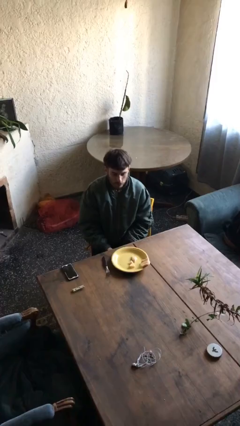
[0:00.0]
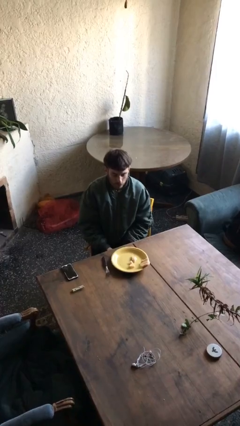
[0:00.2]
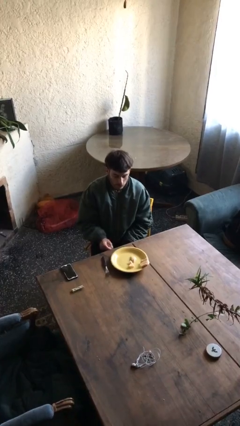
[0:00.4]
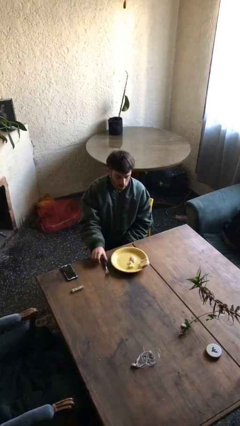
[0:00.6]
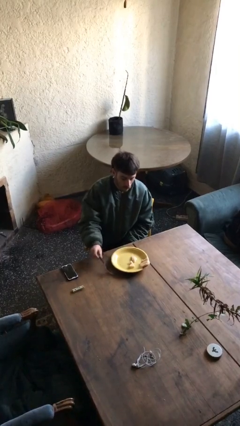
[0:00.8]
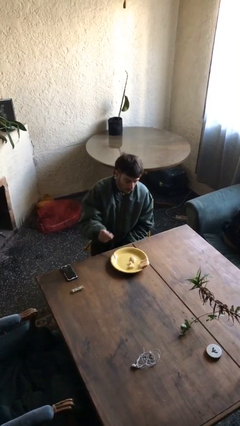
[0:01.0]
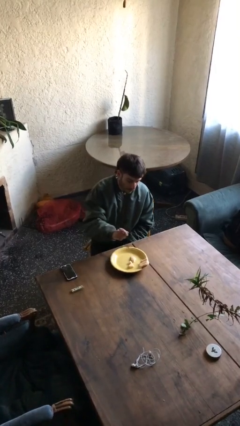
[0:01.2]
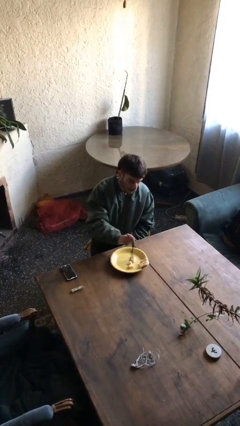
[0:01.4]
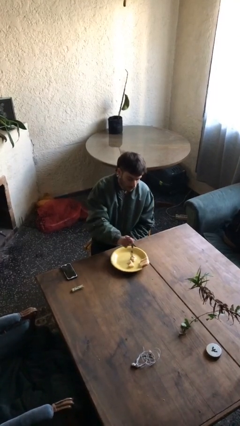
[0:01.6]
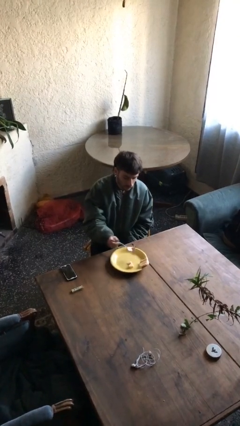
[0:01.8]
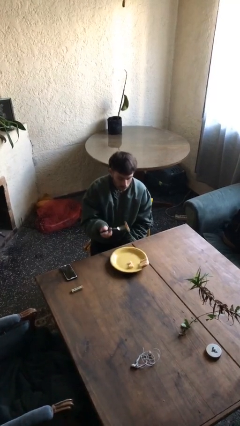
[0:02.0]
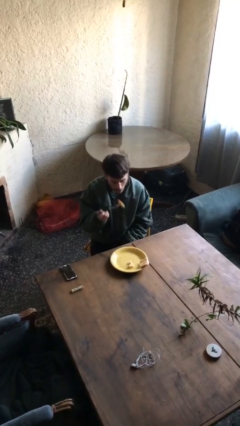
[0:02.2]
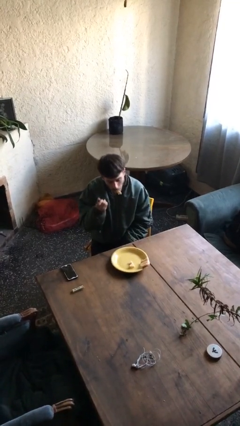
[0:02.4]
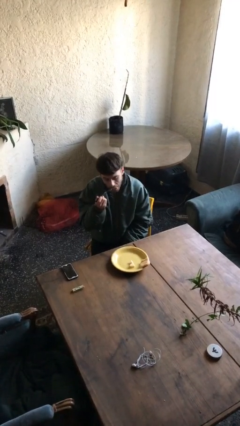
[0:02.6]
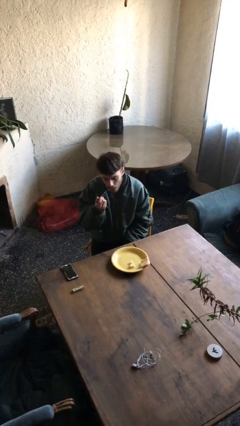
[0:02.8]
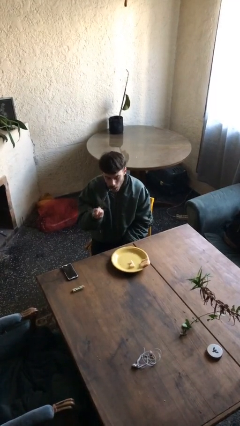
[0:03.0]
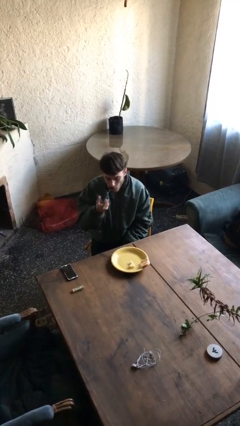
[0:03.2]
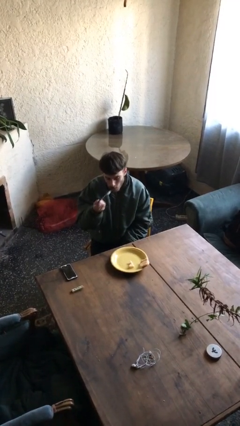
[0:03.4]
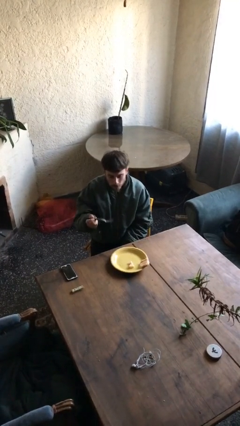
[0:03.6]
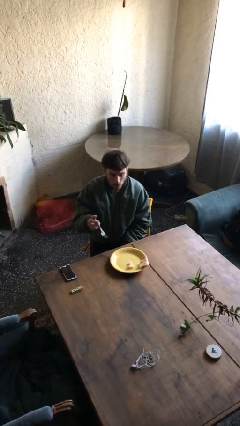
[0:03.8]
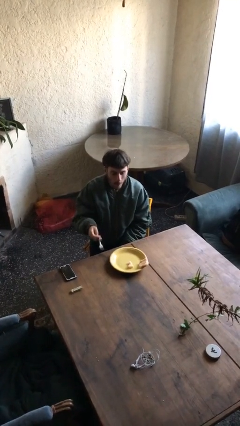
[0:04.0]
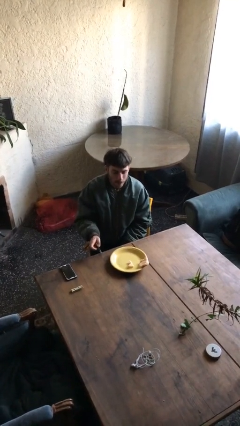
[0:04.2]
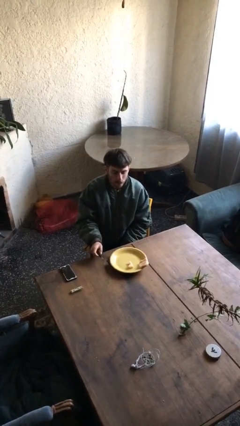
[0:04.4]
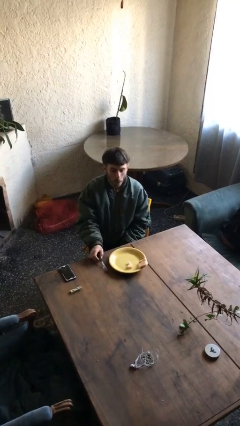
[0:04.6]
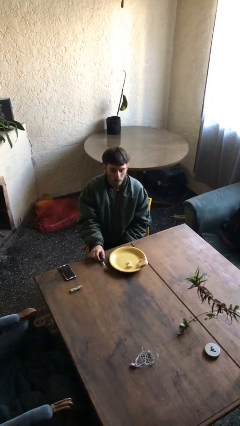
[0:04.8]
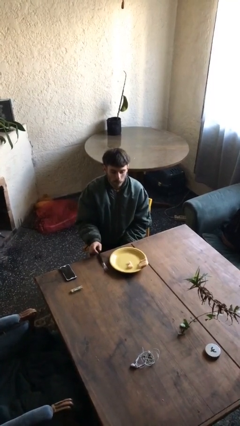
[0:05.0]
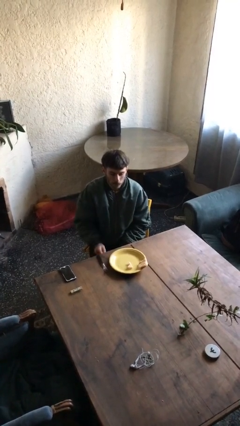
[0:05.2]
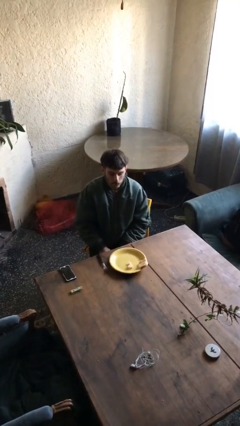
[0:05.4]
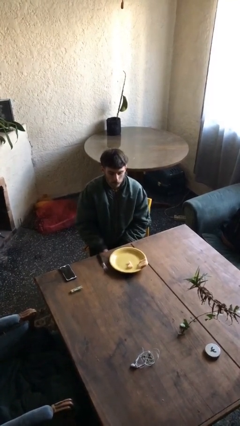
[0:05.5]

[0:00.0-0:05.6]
person eats with utensil

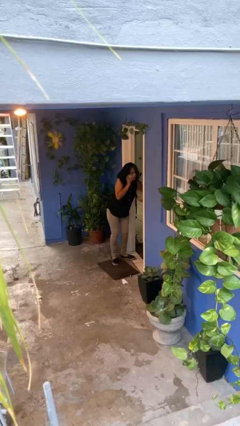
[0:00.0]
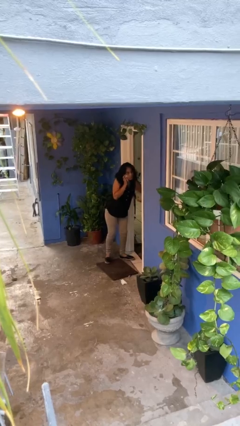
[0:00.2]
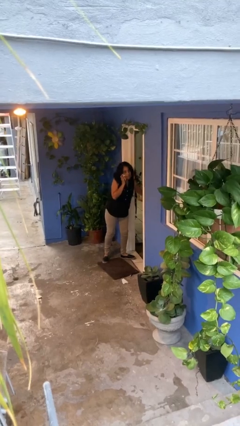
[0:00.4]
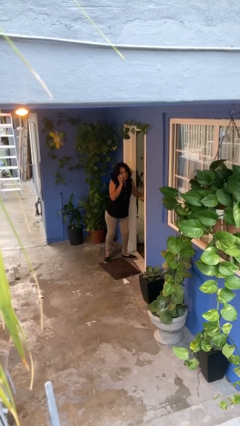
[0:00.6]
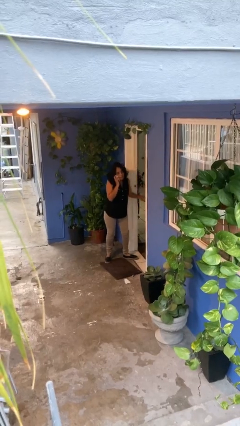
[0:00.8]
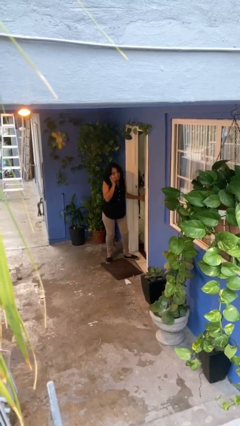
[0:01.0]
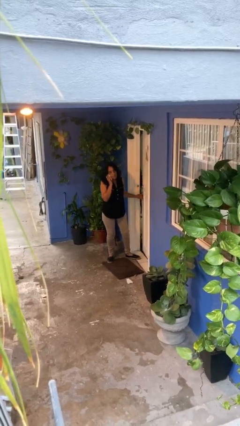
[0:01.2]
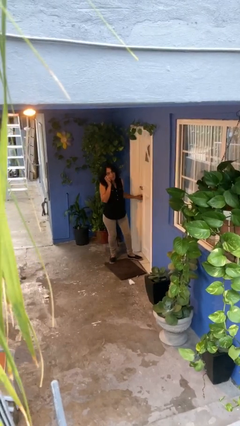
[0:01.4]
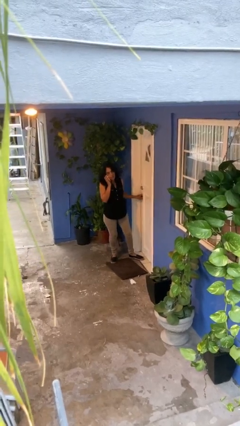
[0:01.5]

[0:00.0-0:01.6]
person closes facility door

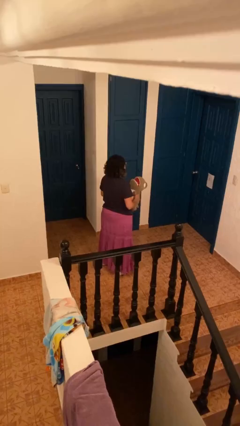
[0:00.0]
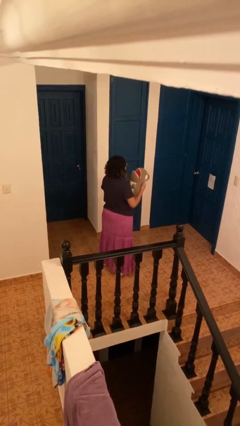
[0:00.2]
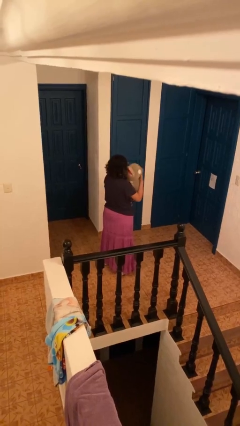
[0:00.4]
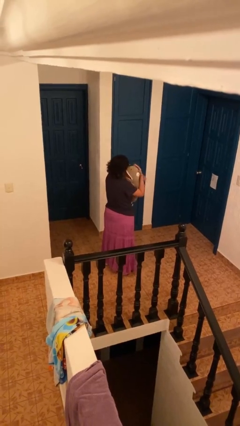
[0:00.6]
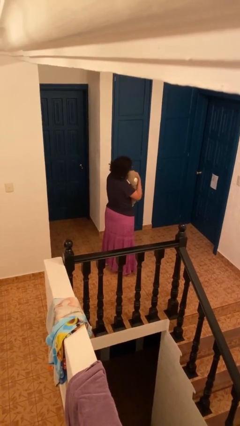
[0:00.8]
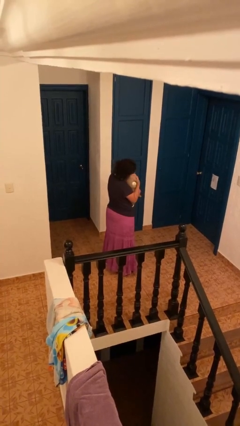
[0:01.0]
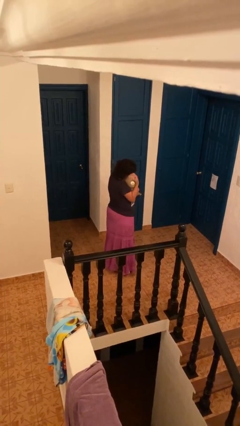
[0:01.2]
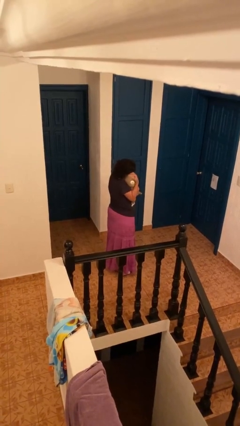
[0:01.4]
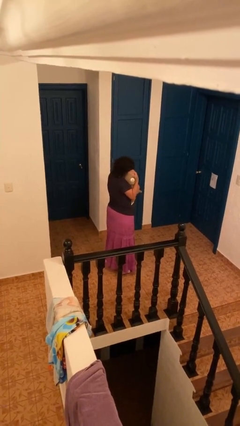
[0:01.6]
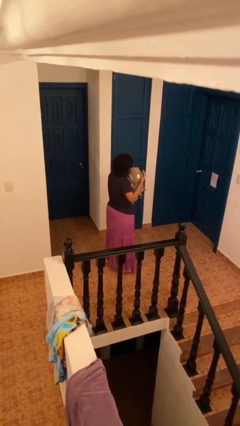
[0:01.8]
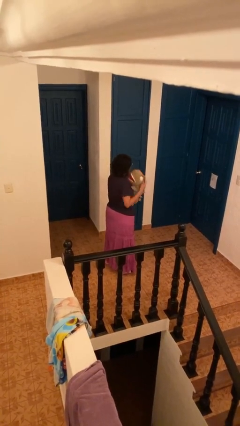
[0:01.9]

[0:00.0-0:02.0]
person hugs stuffed animal

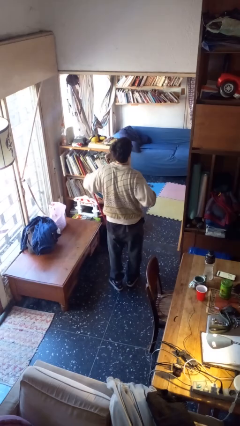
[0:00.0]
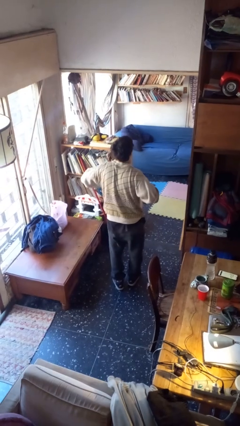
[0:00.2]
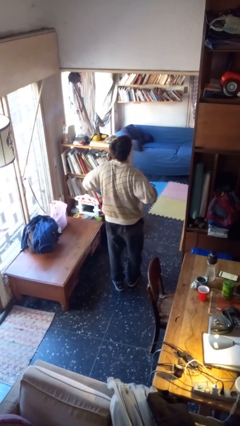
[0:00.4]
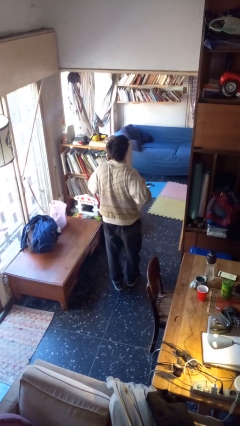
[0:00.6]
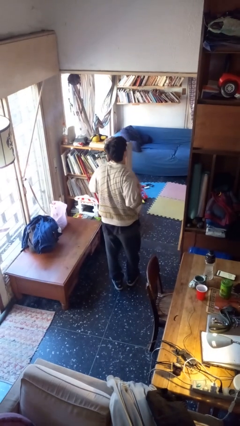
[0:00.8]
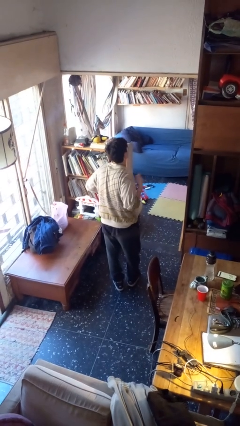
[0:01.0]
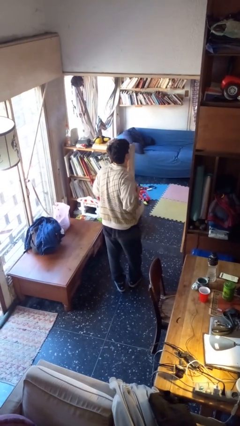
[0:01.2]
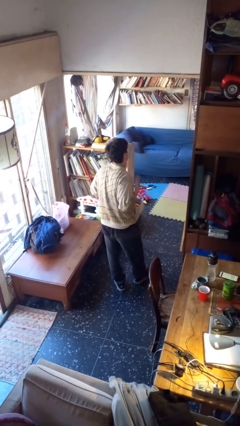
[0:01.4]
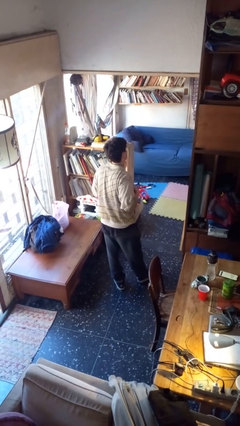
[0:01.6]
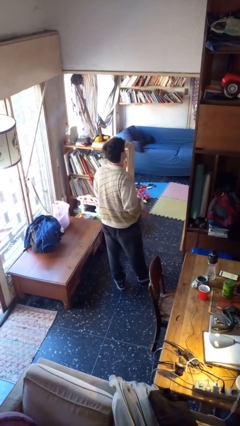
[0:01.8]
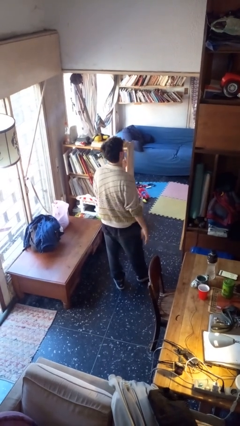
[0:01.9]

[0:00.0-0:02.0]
person drums on chest

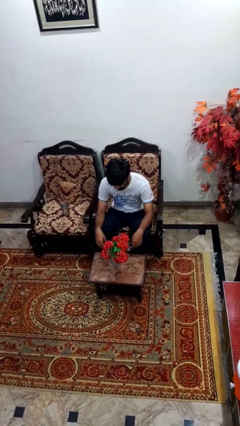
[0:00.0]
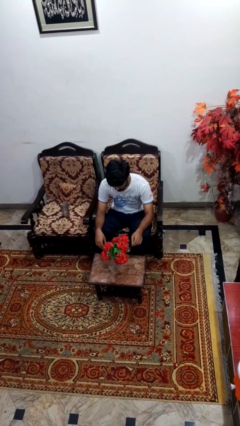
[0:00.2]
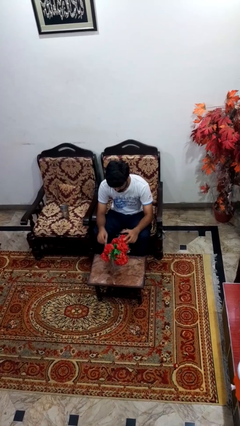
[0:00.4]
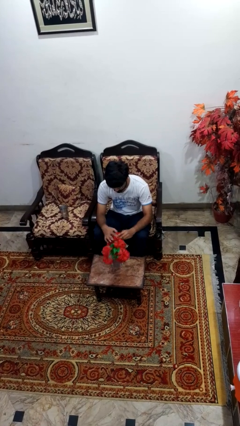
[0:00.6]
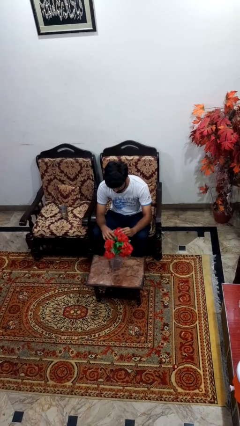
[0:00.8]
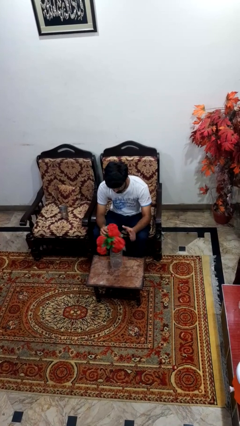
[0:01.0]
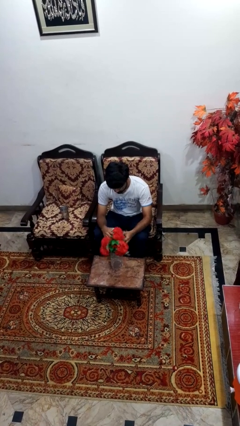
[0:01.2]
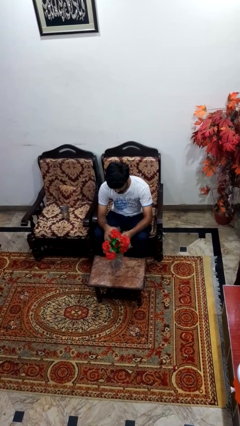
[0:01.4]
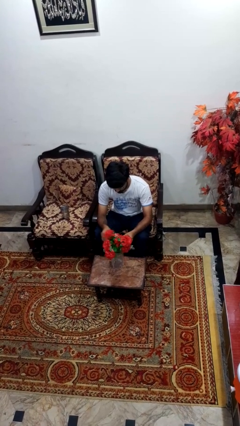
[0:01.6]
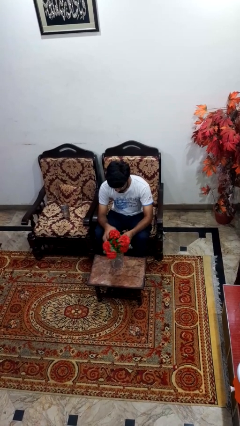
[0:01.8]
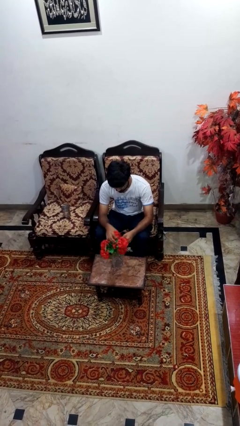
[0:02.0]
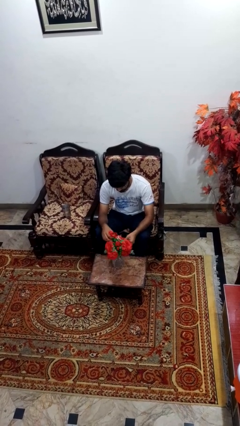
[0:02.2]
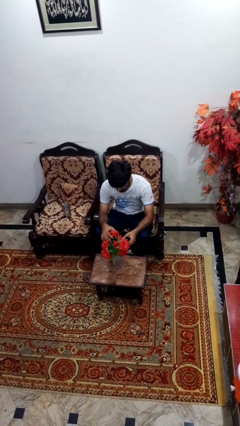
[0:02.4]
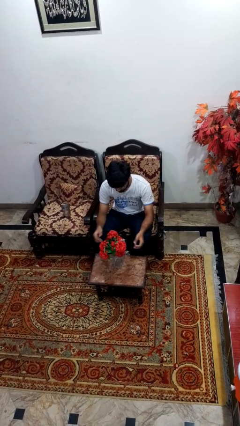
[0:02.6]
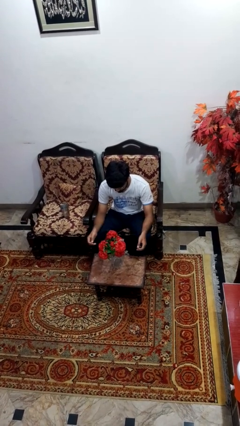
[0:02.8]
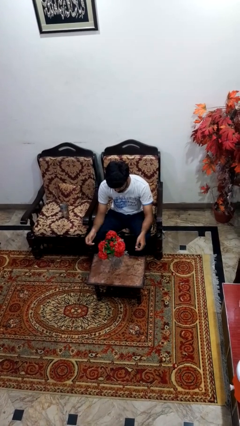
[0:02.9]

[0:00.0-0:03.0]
person arranges flowers in vase

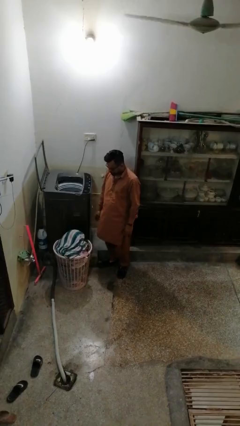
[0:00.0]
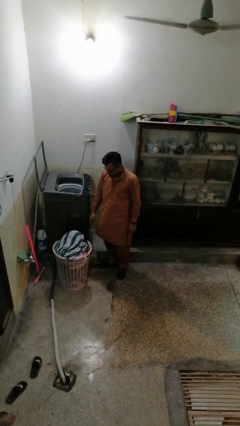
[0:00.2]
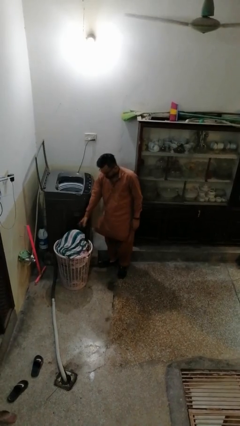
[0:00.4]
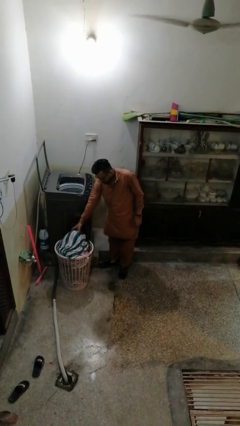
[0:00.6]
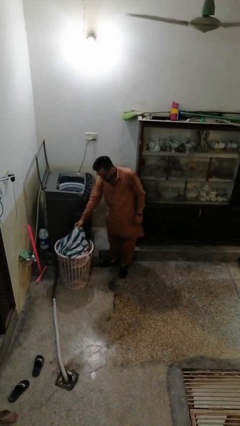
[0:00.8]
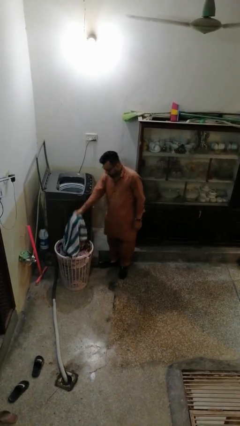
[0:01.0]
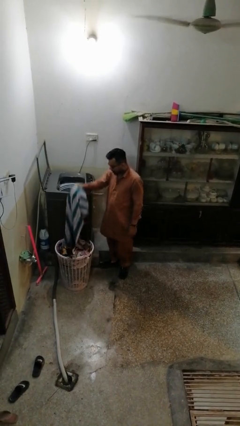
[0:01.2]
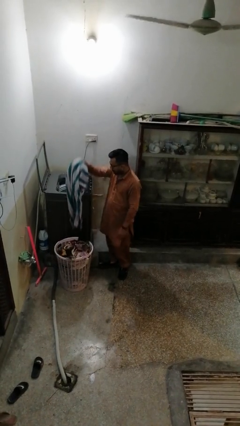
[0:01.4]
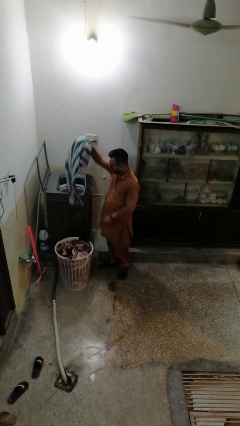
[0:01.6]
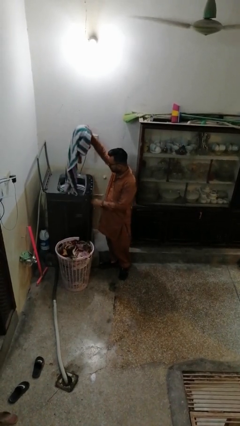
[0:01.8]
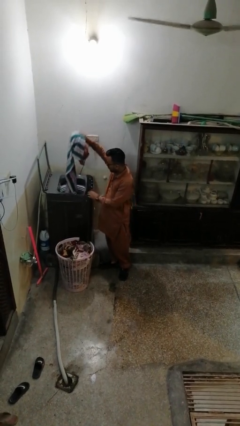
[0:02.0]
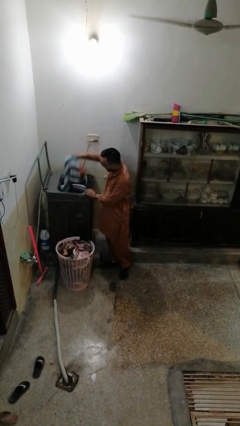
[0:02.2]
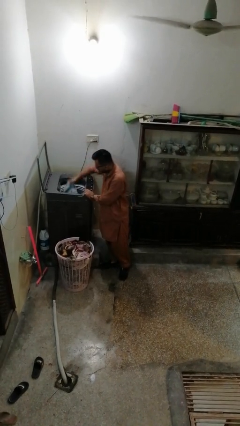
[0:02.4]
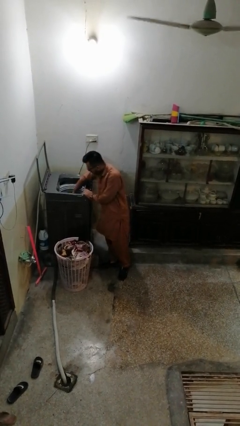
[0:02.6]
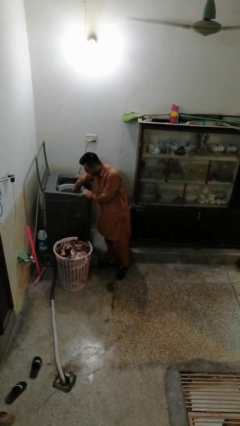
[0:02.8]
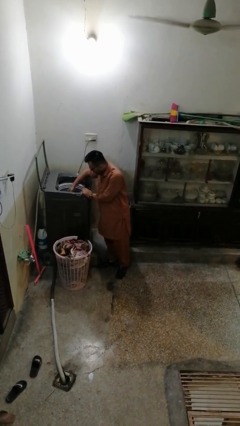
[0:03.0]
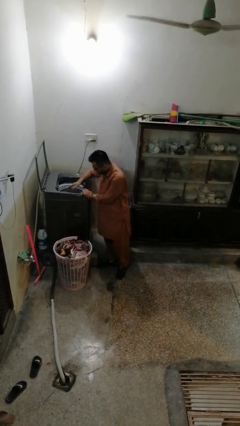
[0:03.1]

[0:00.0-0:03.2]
person loads clotheswasher
